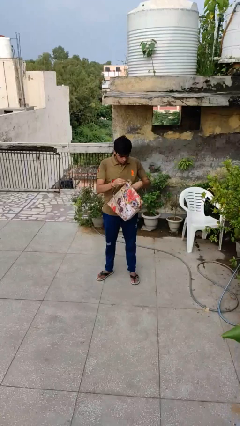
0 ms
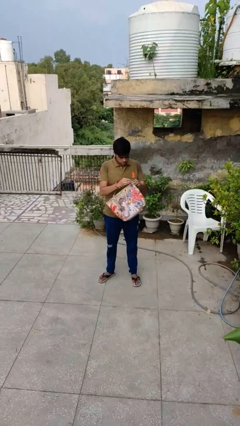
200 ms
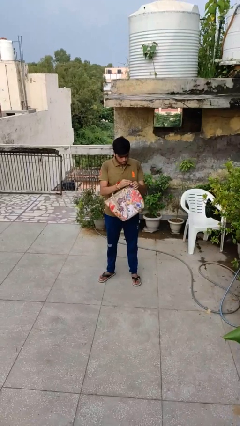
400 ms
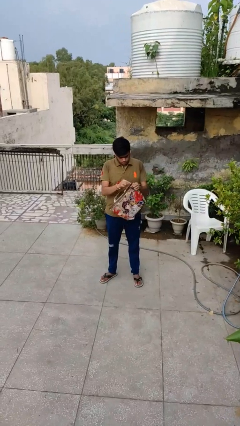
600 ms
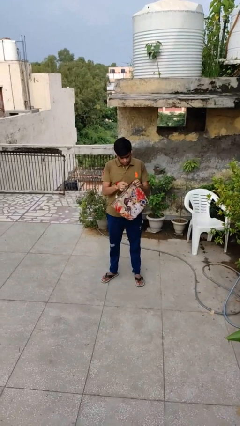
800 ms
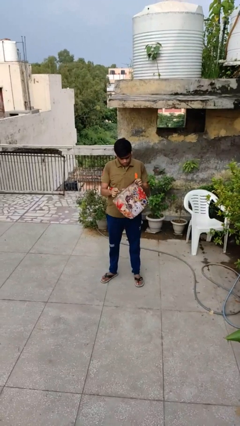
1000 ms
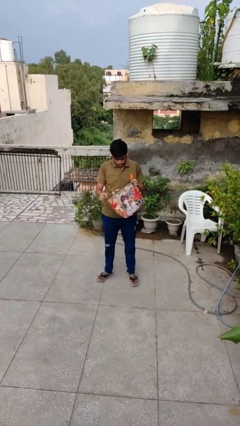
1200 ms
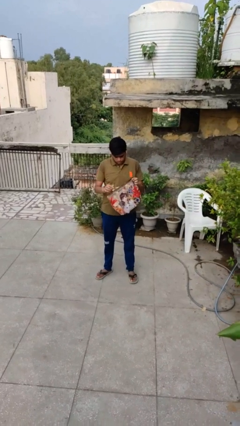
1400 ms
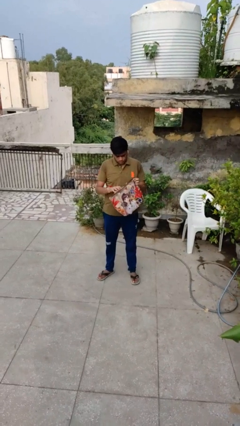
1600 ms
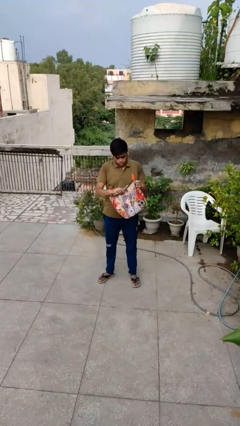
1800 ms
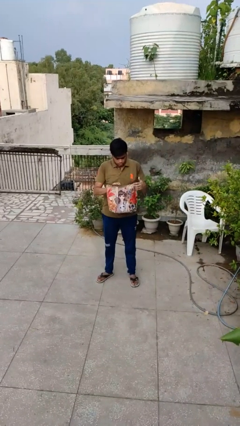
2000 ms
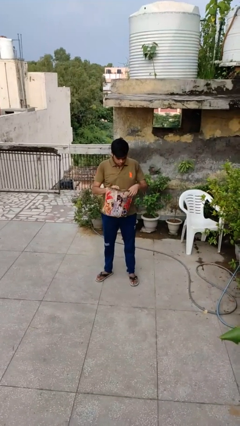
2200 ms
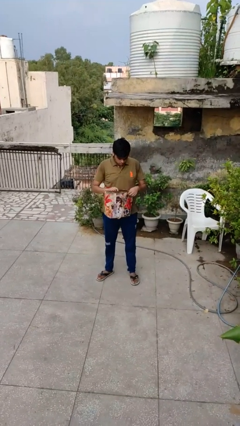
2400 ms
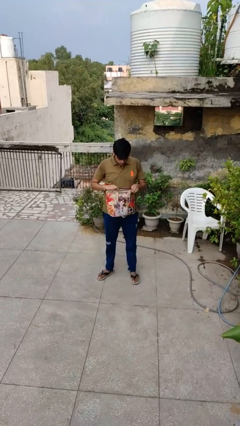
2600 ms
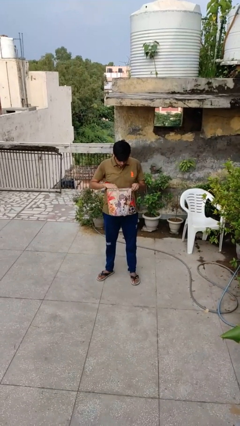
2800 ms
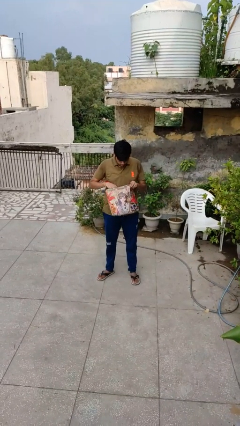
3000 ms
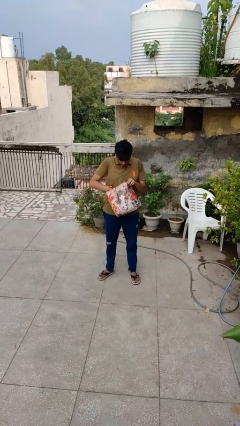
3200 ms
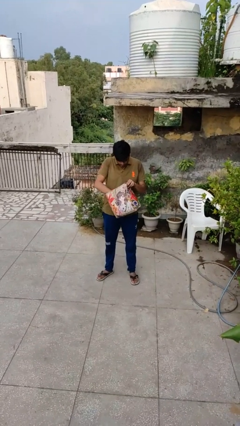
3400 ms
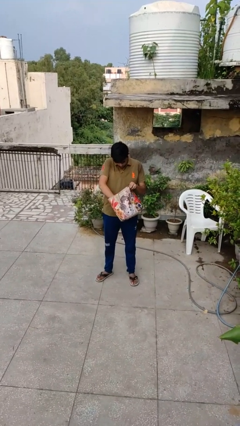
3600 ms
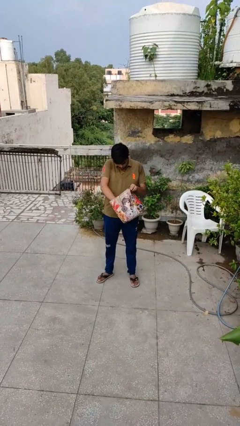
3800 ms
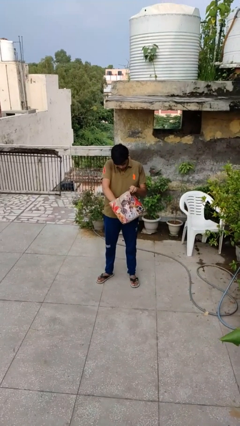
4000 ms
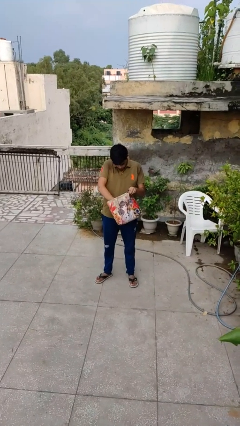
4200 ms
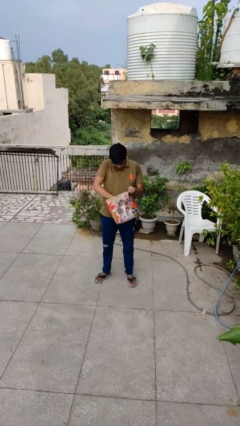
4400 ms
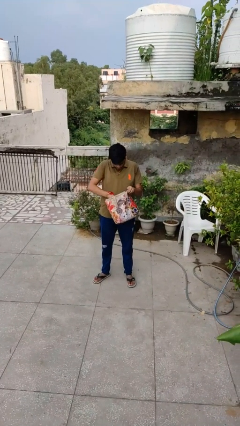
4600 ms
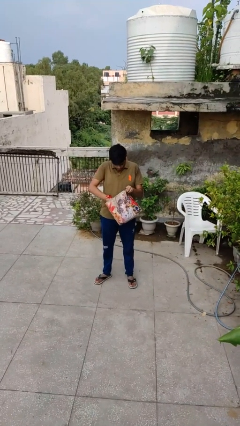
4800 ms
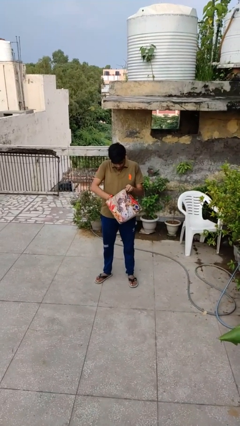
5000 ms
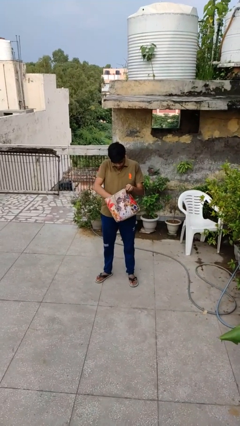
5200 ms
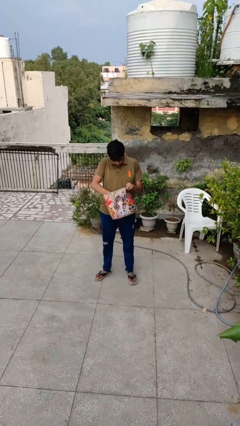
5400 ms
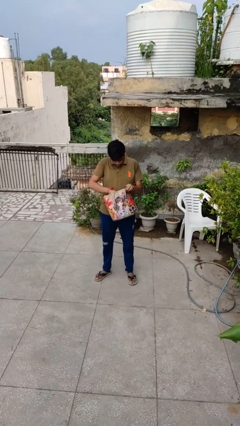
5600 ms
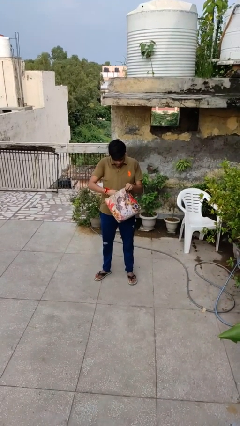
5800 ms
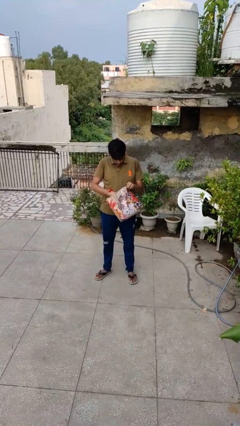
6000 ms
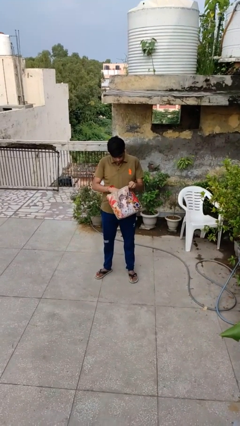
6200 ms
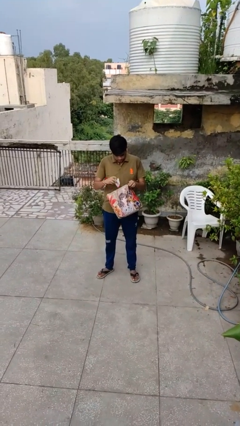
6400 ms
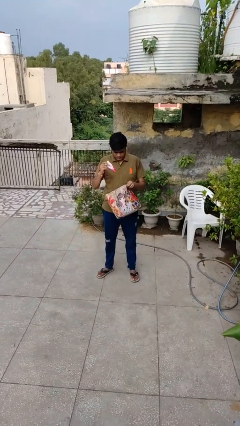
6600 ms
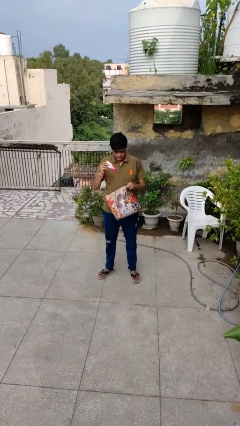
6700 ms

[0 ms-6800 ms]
person searches in purse

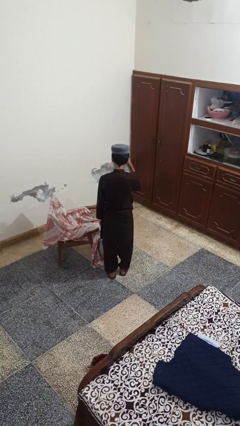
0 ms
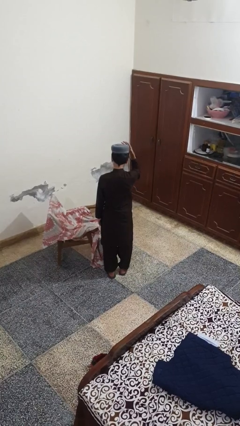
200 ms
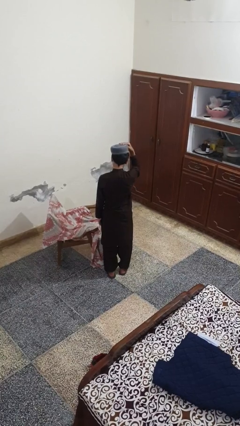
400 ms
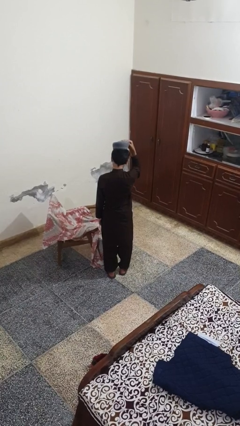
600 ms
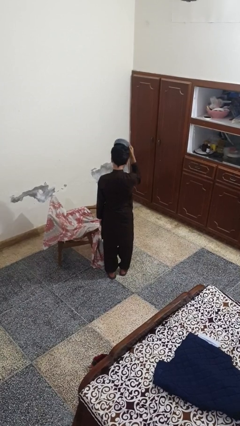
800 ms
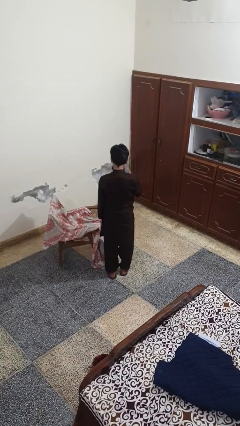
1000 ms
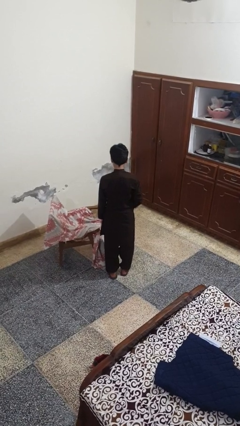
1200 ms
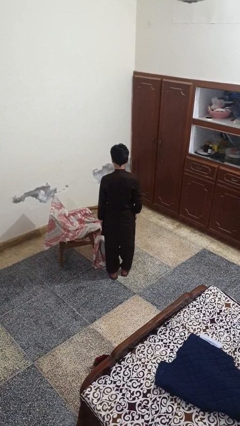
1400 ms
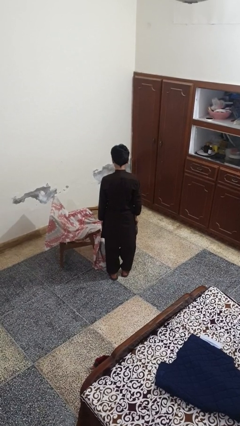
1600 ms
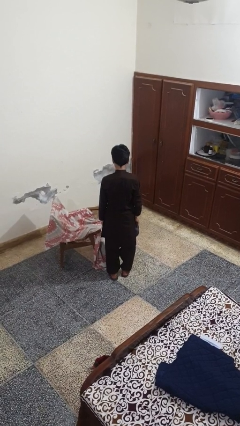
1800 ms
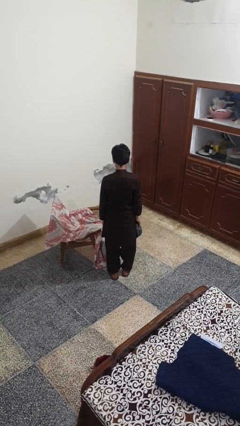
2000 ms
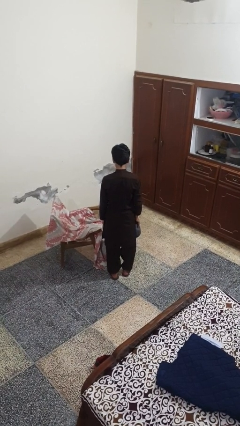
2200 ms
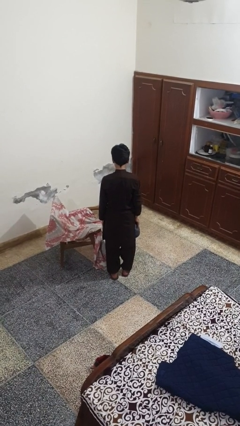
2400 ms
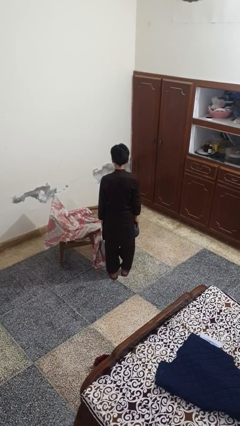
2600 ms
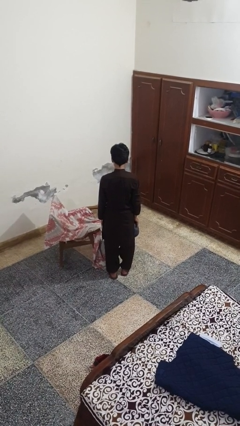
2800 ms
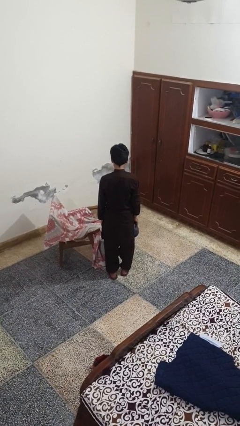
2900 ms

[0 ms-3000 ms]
person takes off hat

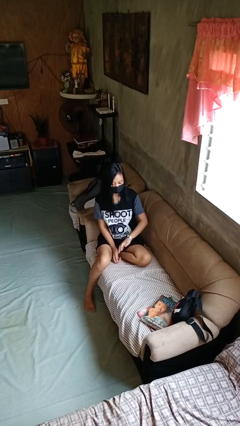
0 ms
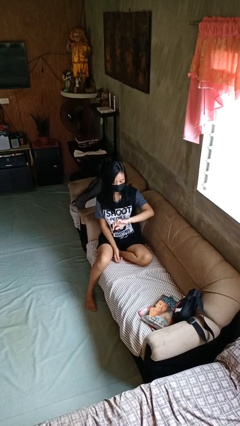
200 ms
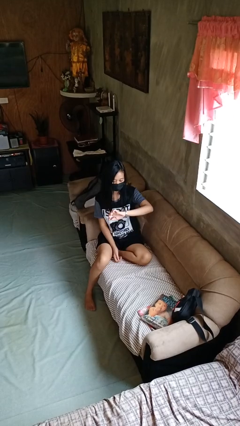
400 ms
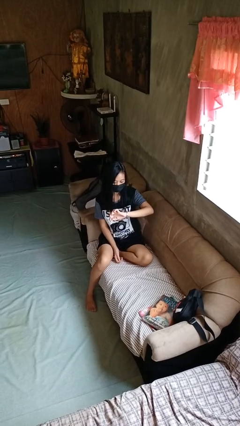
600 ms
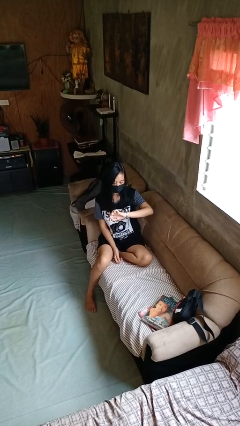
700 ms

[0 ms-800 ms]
person looks at wristwatch

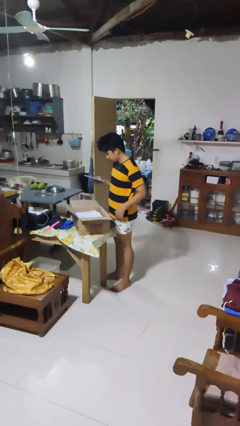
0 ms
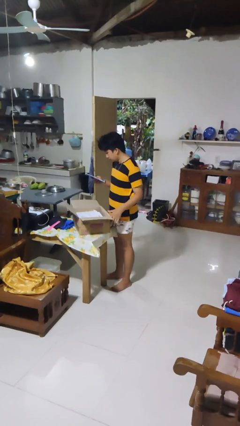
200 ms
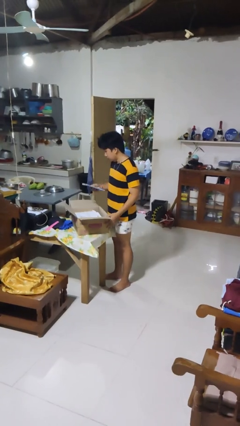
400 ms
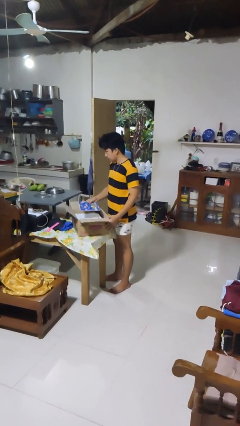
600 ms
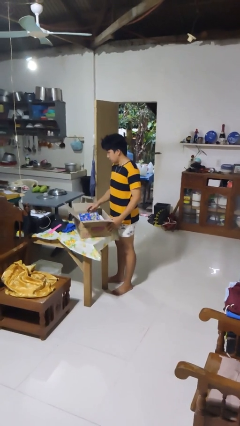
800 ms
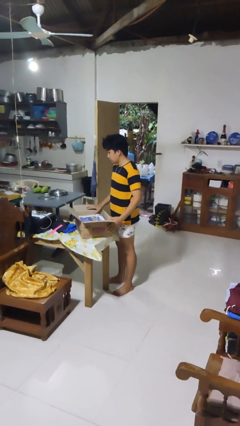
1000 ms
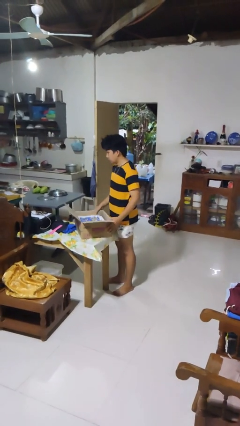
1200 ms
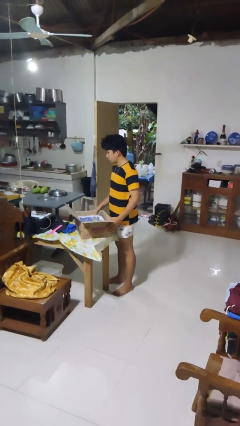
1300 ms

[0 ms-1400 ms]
person puts object into box

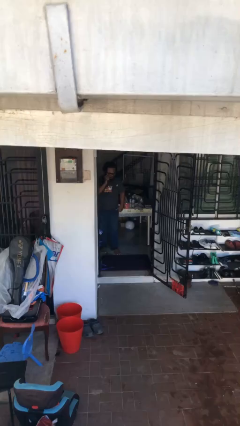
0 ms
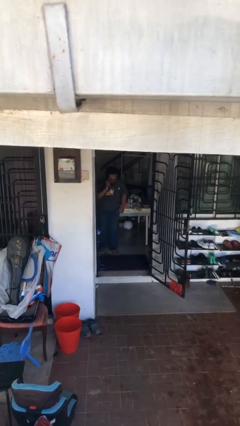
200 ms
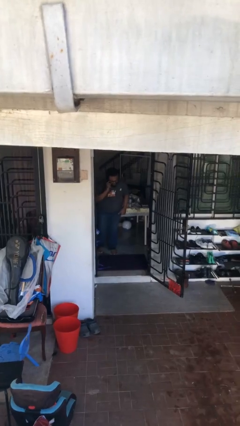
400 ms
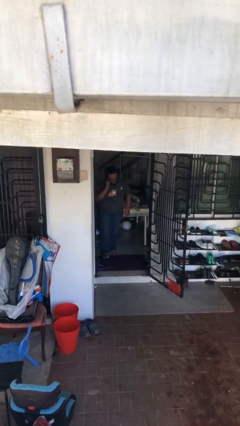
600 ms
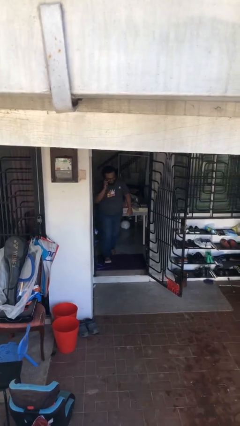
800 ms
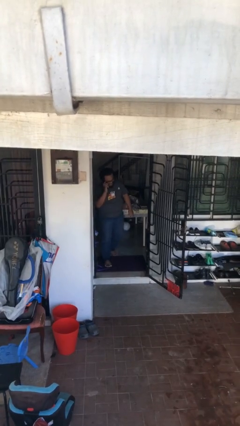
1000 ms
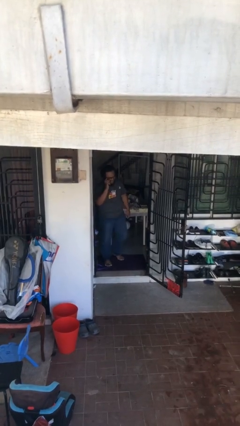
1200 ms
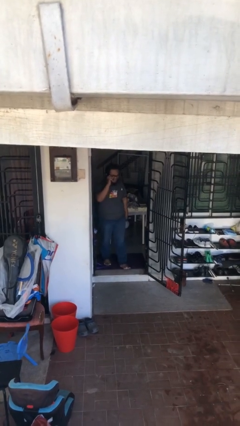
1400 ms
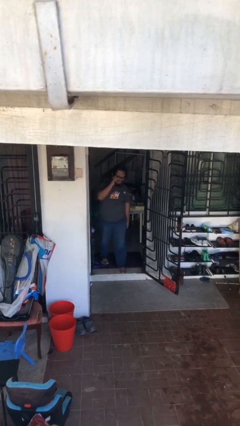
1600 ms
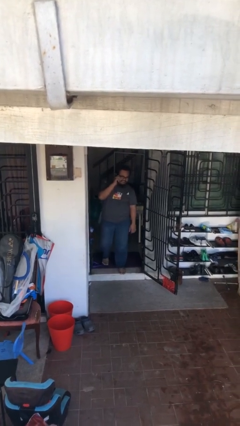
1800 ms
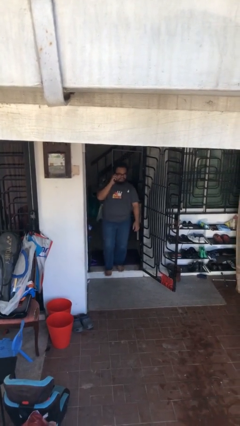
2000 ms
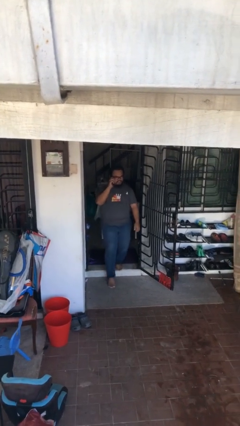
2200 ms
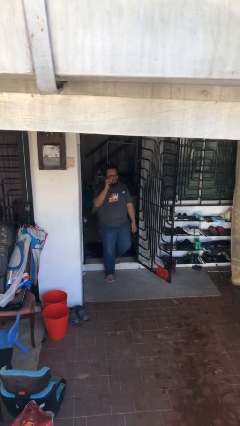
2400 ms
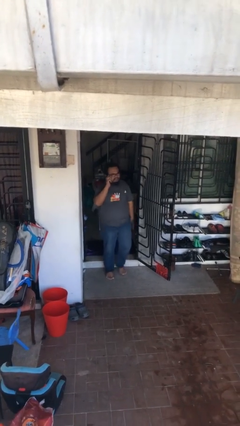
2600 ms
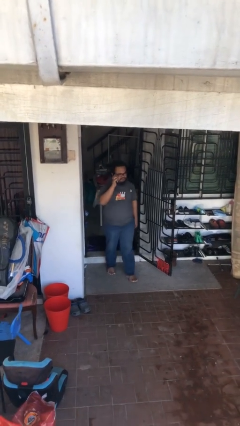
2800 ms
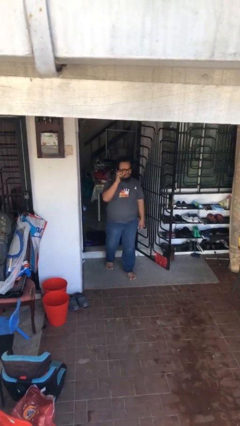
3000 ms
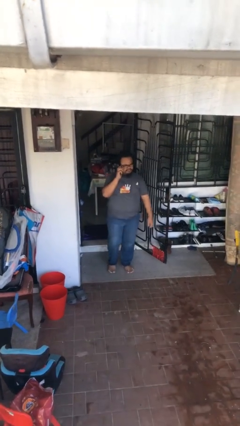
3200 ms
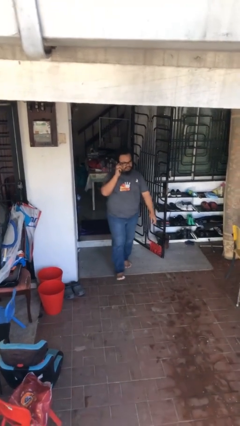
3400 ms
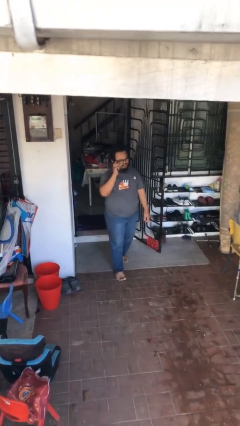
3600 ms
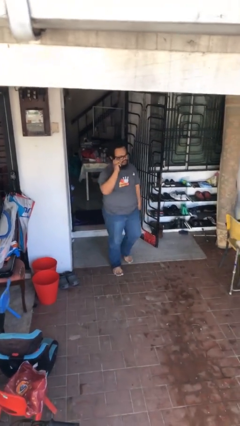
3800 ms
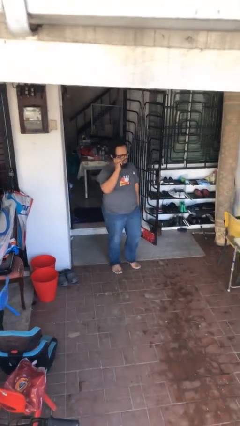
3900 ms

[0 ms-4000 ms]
person enters scene through structure

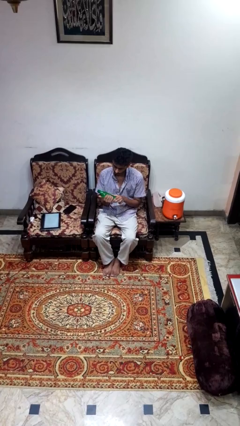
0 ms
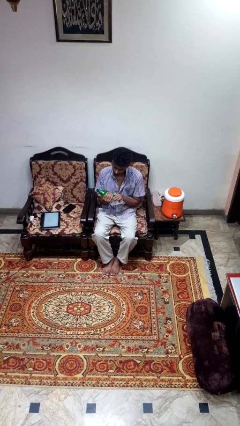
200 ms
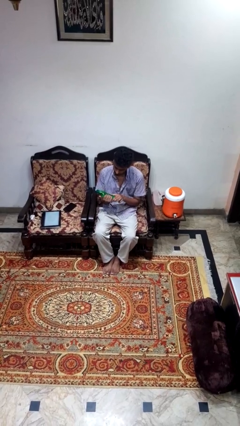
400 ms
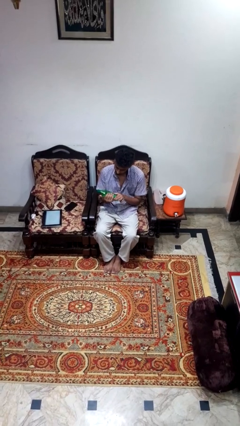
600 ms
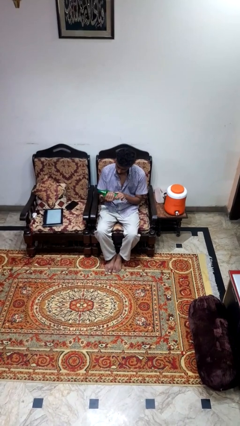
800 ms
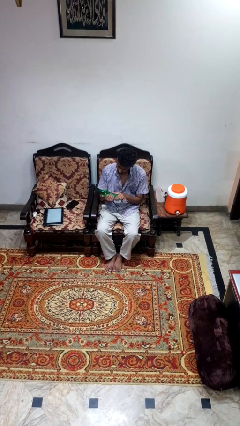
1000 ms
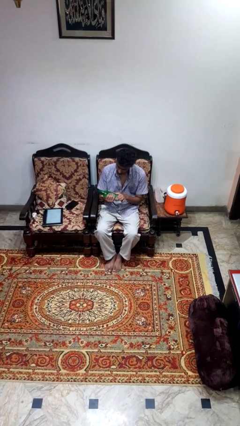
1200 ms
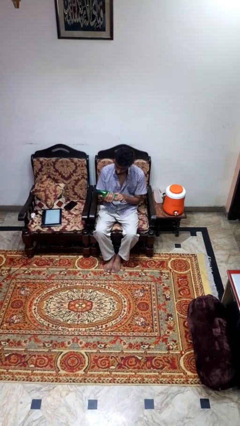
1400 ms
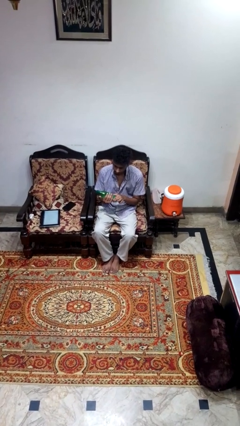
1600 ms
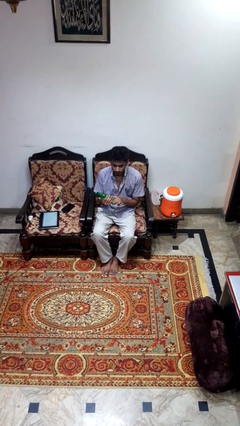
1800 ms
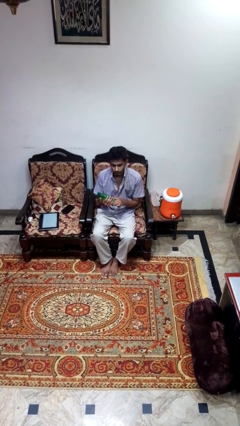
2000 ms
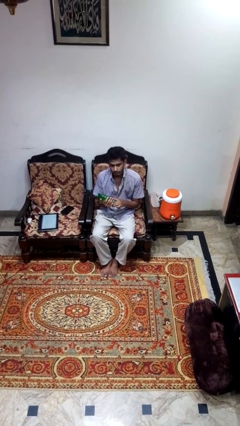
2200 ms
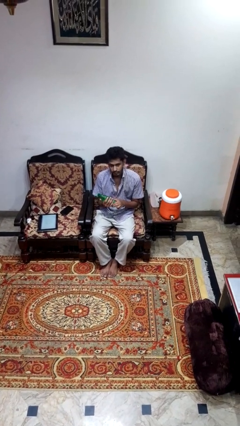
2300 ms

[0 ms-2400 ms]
person squeezes object
